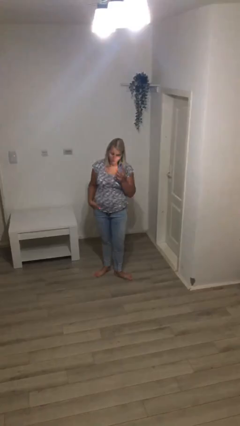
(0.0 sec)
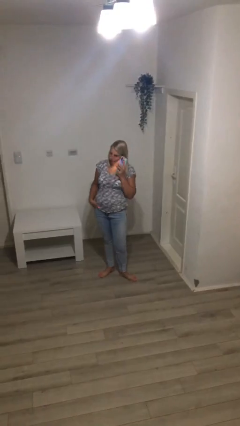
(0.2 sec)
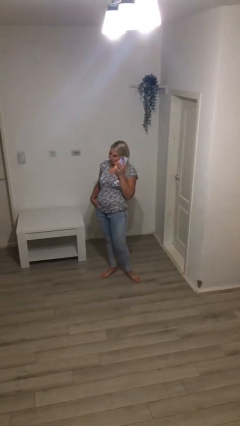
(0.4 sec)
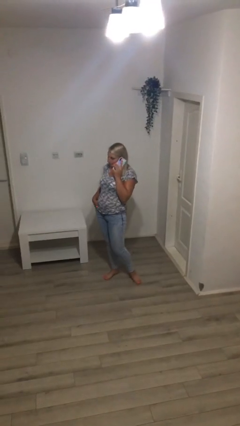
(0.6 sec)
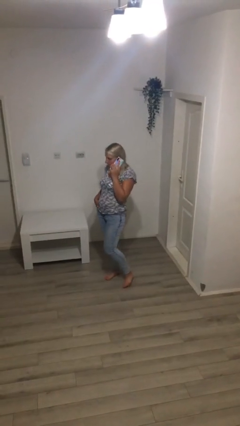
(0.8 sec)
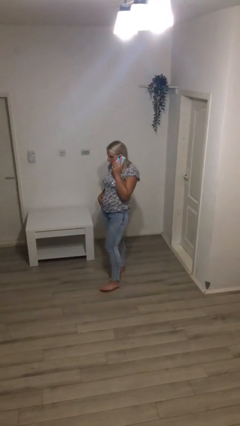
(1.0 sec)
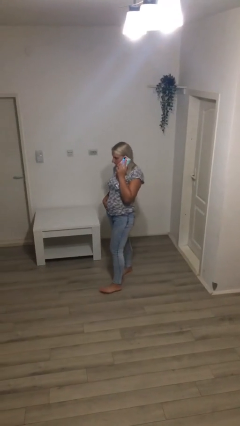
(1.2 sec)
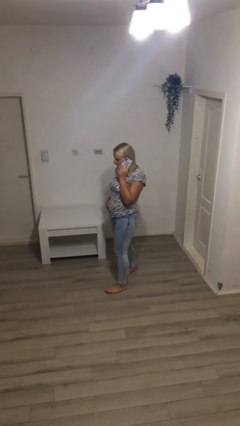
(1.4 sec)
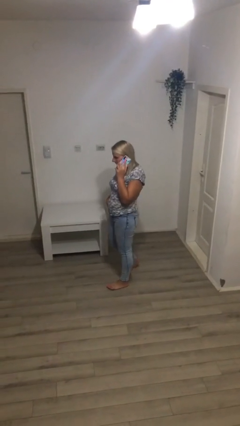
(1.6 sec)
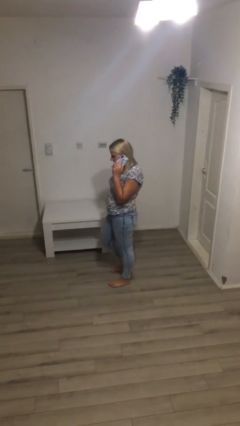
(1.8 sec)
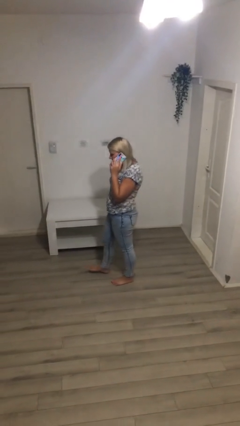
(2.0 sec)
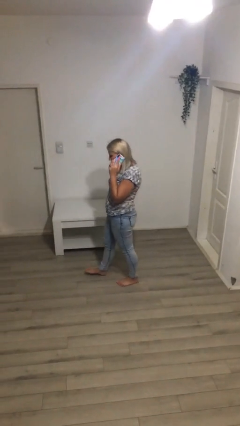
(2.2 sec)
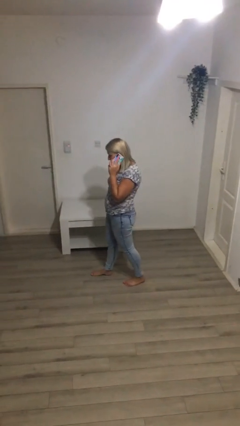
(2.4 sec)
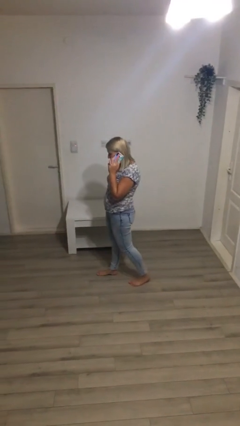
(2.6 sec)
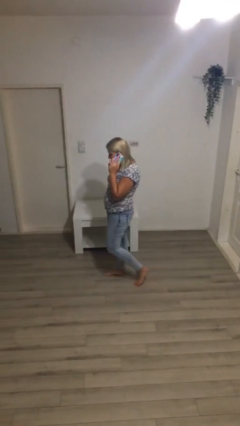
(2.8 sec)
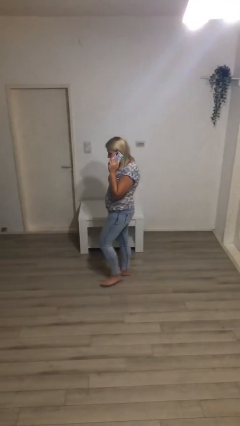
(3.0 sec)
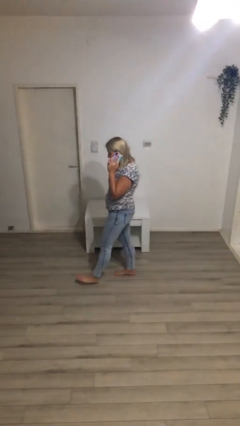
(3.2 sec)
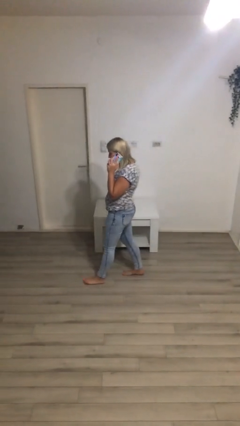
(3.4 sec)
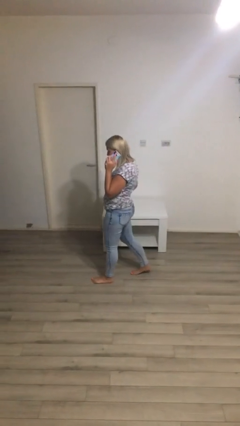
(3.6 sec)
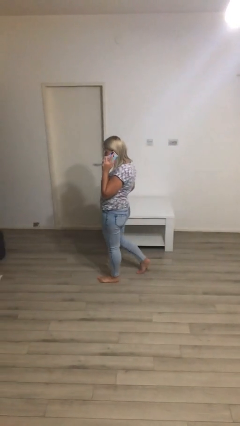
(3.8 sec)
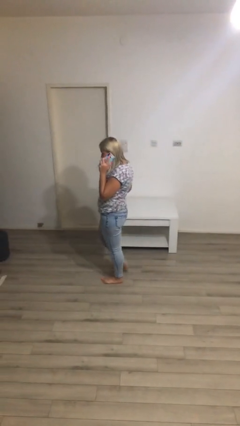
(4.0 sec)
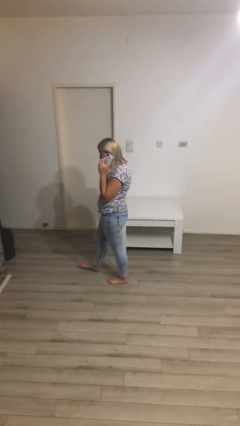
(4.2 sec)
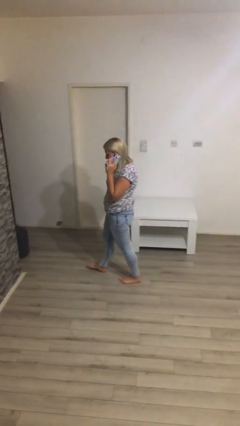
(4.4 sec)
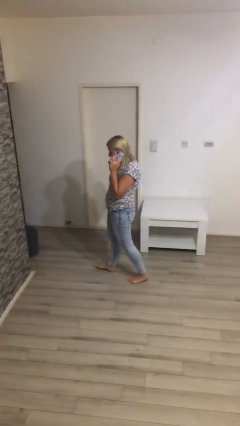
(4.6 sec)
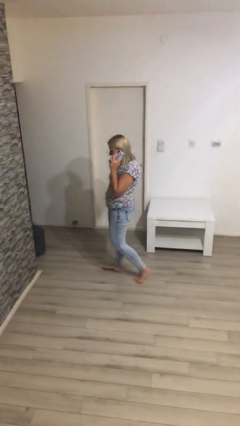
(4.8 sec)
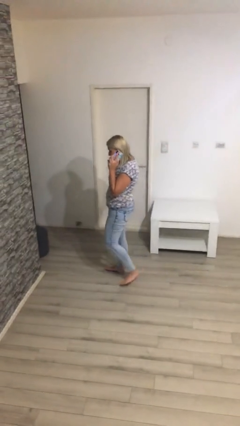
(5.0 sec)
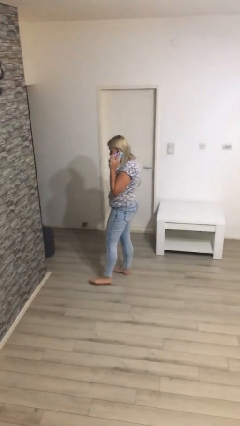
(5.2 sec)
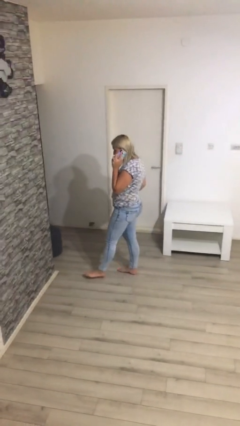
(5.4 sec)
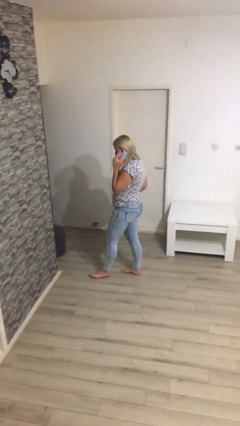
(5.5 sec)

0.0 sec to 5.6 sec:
person talks on phone

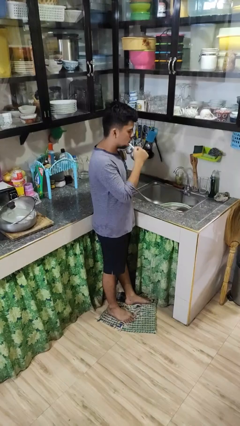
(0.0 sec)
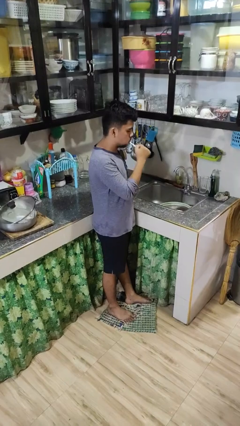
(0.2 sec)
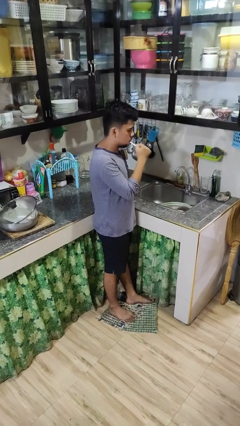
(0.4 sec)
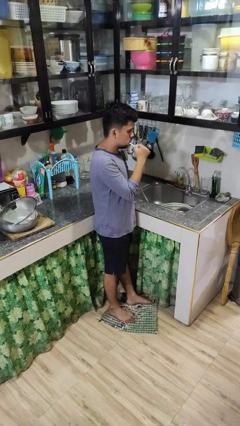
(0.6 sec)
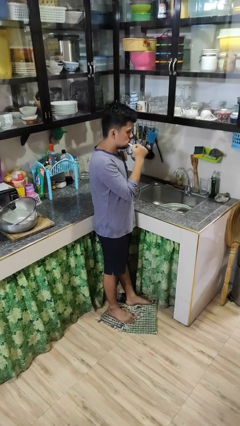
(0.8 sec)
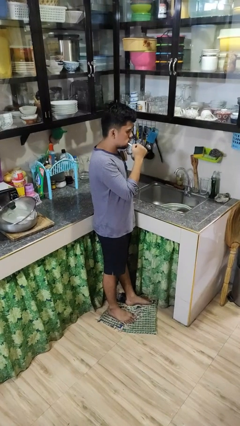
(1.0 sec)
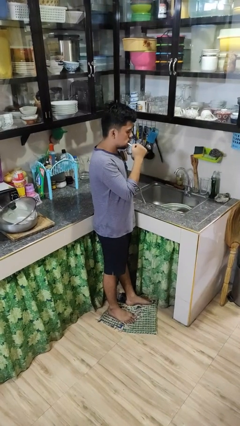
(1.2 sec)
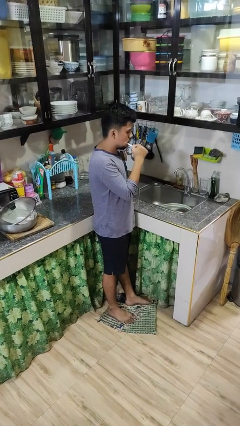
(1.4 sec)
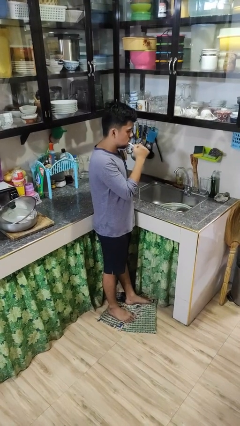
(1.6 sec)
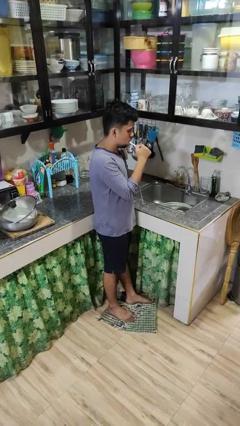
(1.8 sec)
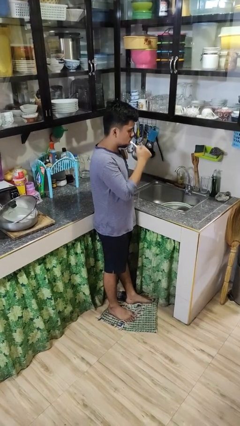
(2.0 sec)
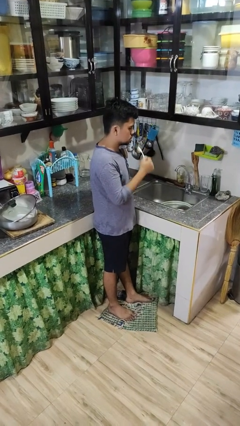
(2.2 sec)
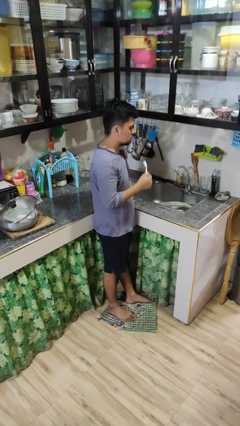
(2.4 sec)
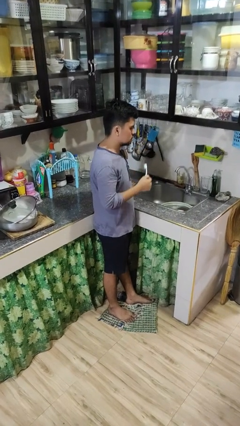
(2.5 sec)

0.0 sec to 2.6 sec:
person brushes teeth

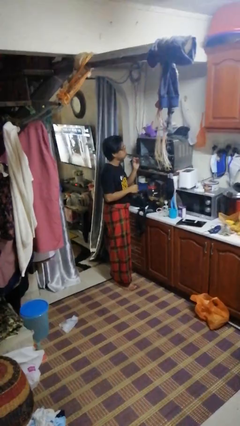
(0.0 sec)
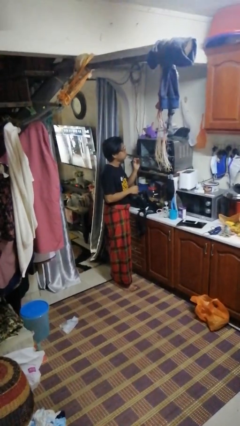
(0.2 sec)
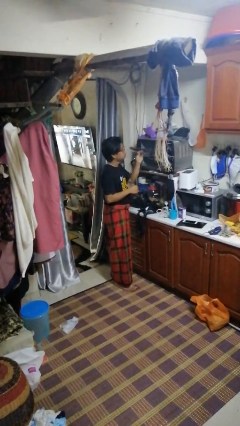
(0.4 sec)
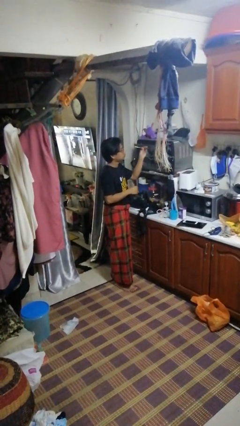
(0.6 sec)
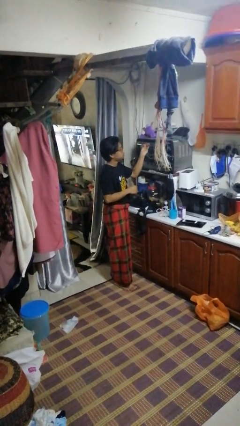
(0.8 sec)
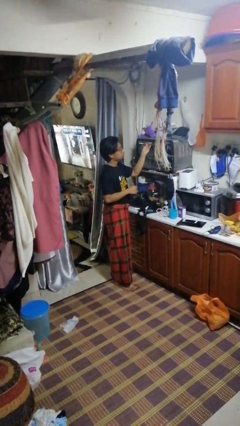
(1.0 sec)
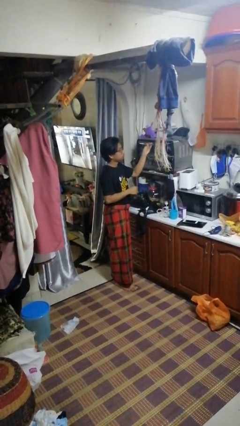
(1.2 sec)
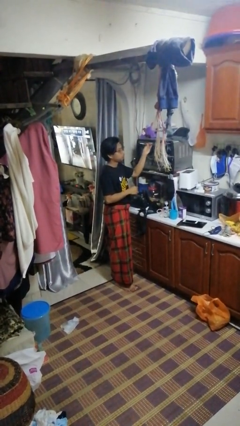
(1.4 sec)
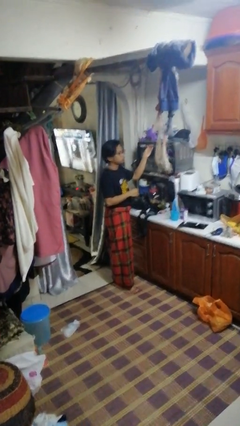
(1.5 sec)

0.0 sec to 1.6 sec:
person closes oven door

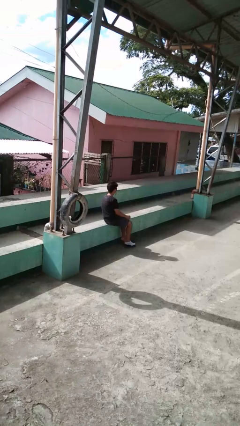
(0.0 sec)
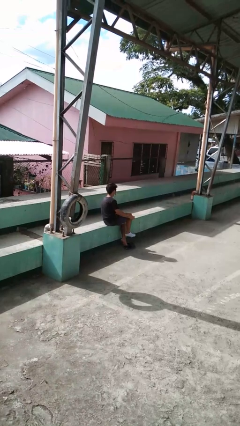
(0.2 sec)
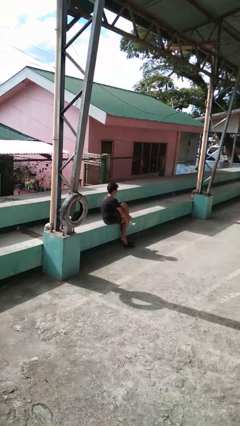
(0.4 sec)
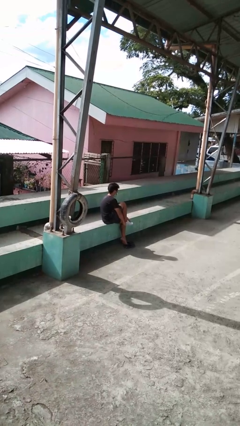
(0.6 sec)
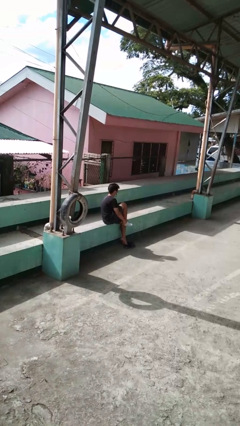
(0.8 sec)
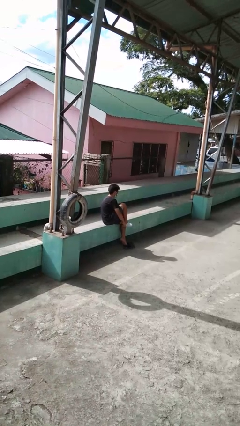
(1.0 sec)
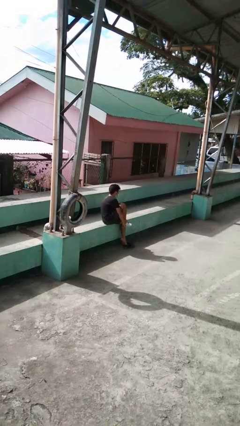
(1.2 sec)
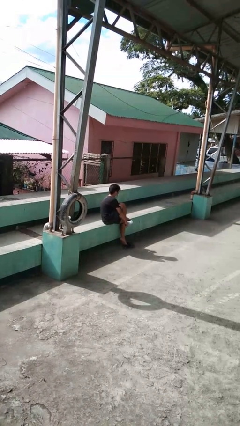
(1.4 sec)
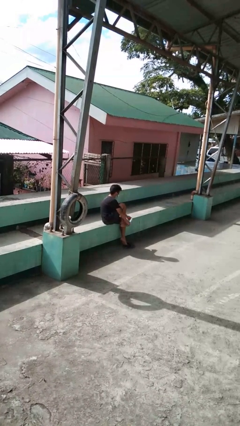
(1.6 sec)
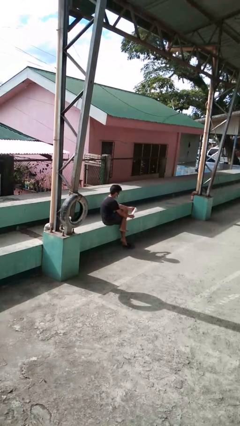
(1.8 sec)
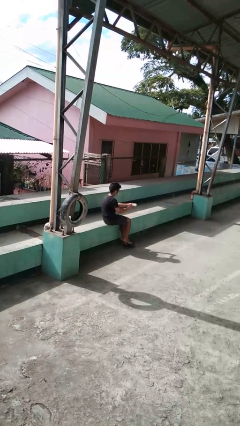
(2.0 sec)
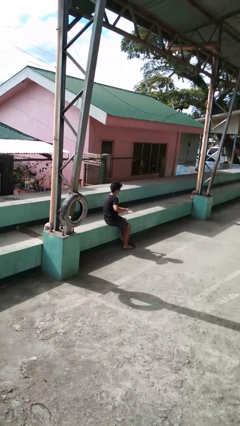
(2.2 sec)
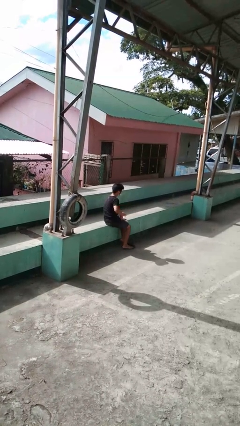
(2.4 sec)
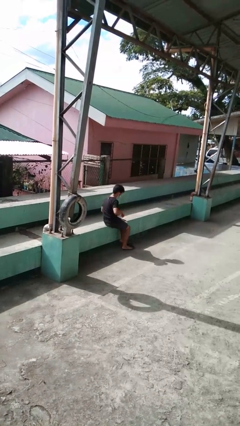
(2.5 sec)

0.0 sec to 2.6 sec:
person takes off socks

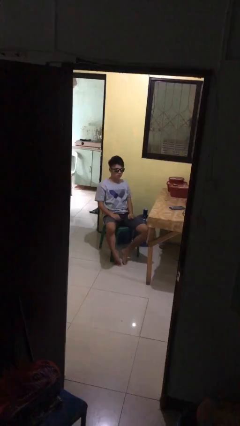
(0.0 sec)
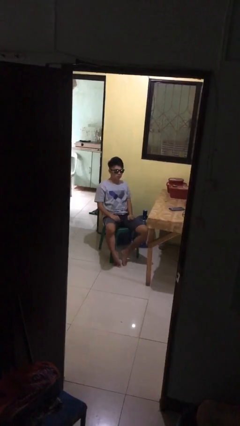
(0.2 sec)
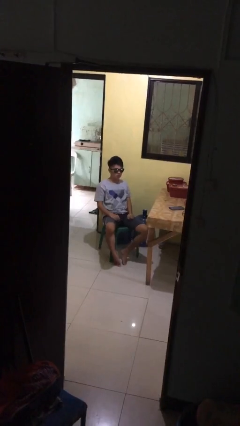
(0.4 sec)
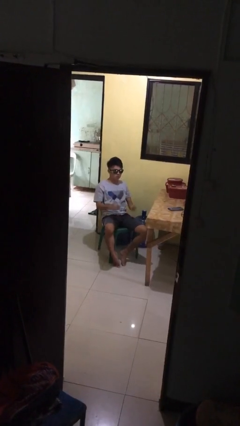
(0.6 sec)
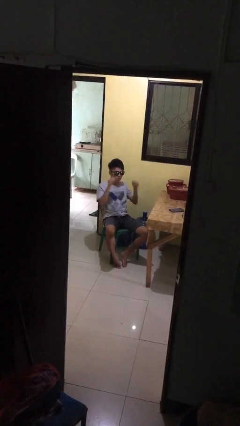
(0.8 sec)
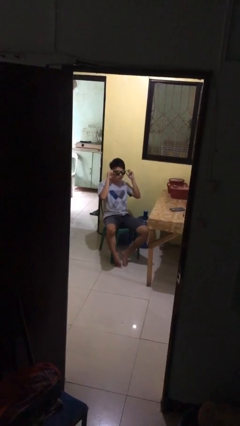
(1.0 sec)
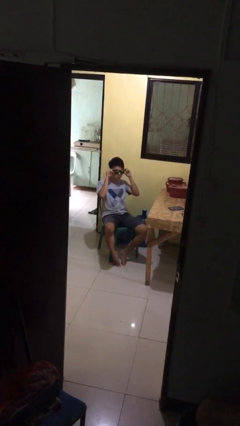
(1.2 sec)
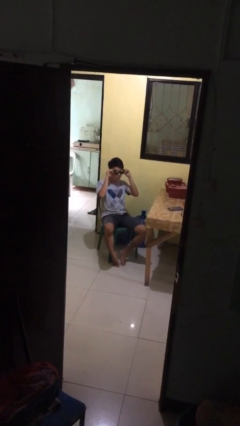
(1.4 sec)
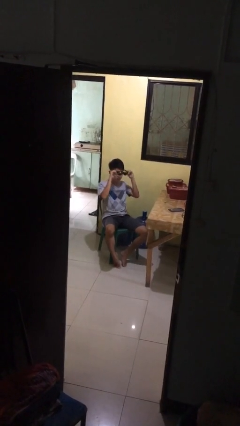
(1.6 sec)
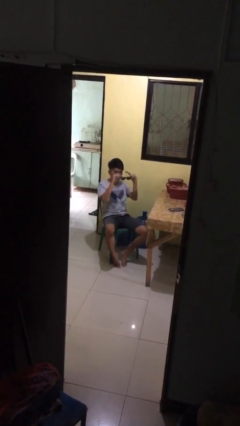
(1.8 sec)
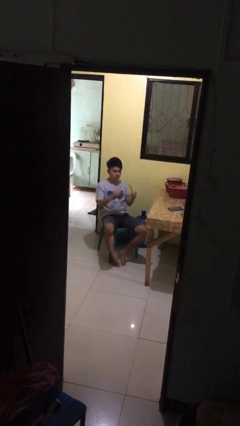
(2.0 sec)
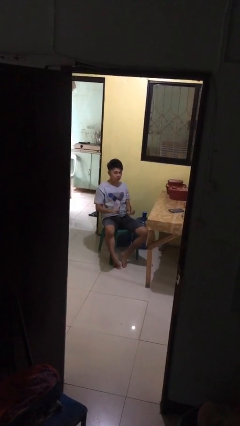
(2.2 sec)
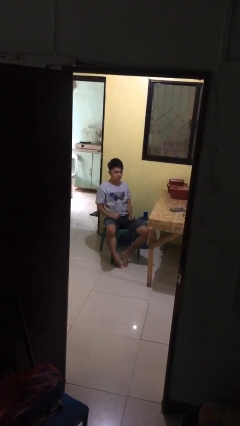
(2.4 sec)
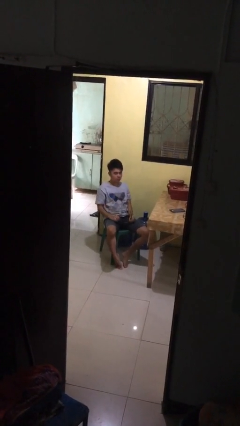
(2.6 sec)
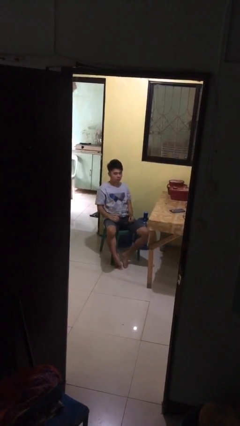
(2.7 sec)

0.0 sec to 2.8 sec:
person takes off sunglasses

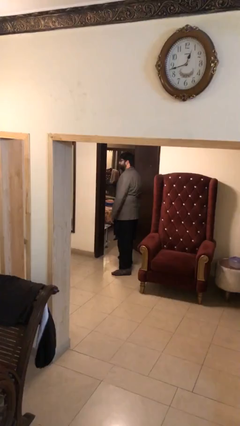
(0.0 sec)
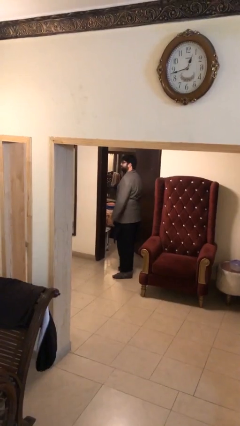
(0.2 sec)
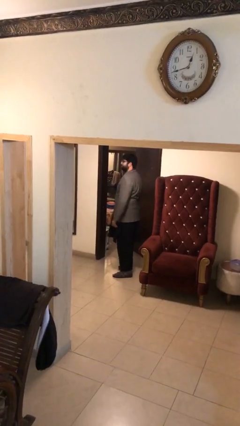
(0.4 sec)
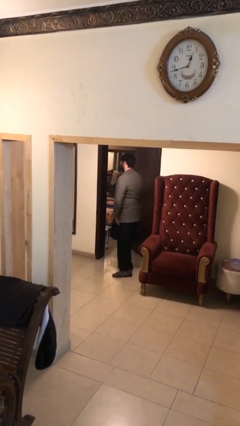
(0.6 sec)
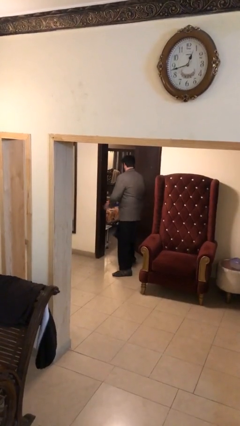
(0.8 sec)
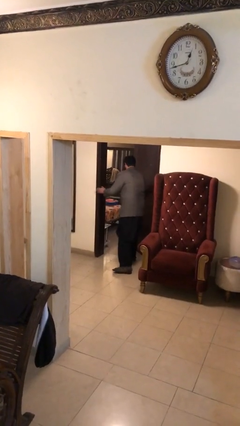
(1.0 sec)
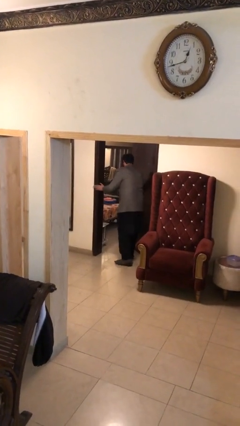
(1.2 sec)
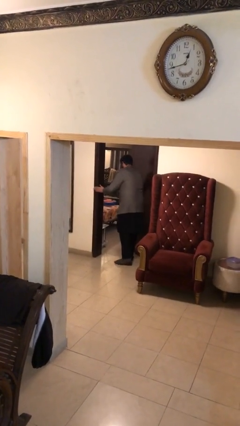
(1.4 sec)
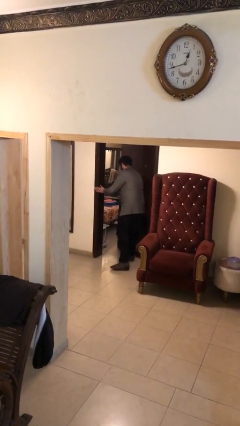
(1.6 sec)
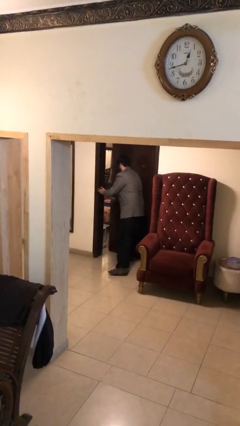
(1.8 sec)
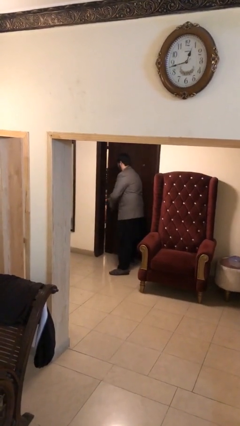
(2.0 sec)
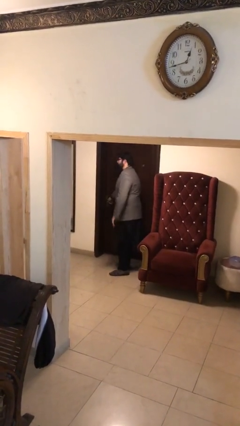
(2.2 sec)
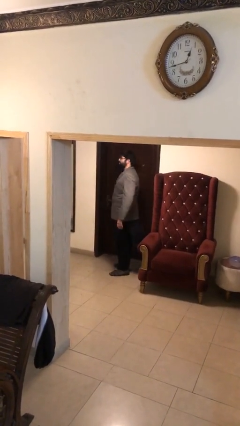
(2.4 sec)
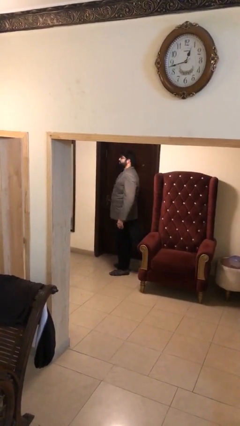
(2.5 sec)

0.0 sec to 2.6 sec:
person closes facility door
